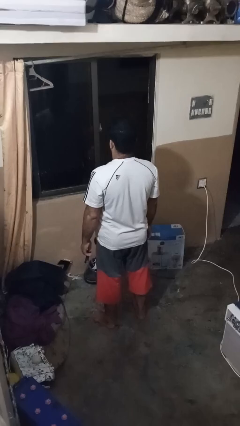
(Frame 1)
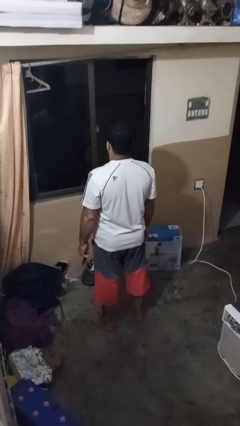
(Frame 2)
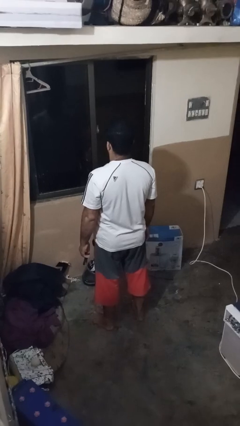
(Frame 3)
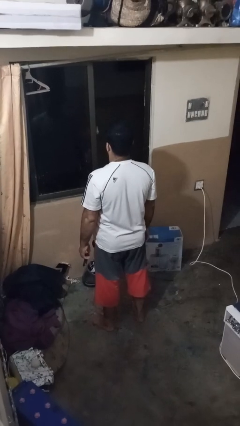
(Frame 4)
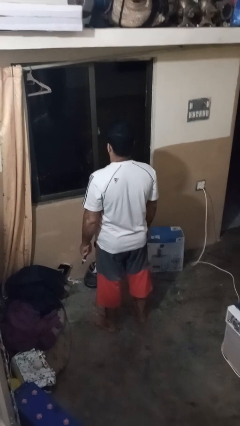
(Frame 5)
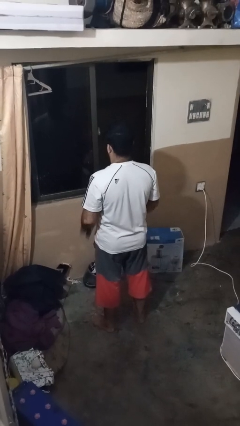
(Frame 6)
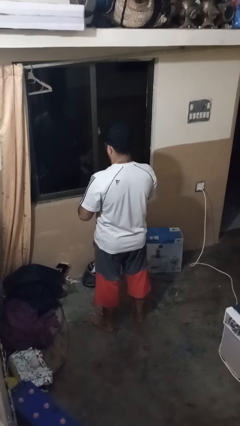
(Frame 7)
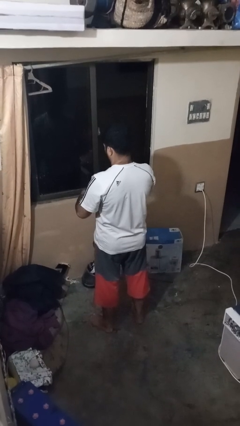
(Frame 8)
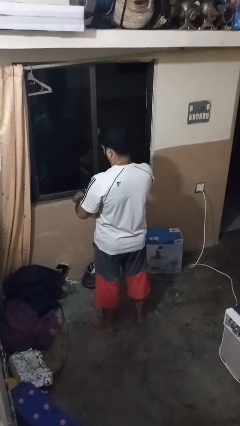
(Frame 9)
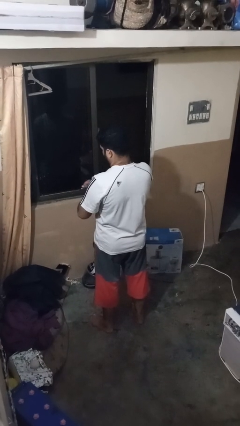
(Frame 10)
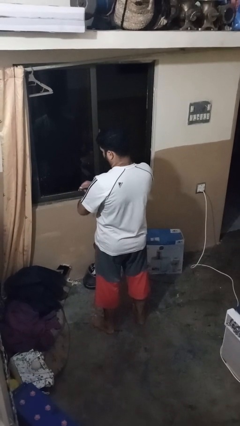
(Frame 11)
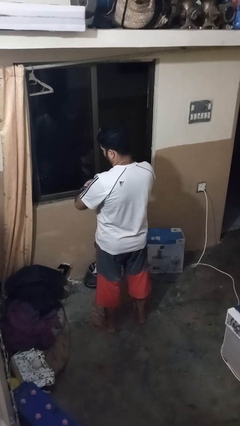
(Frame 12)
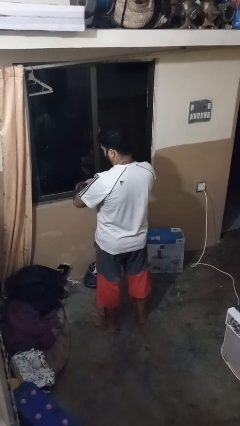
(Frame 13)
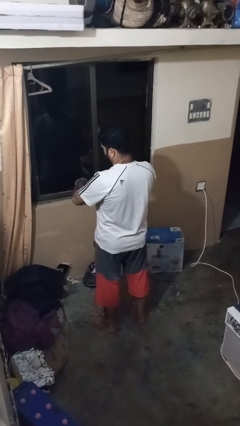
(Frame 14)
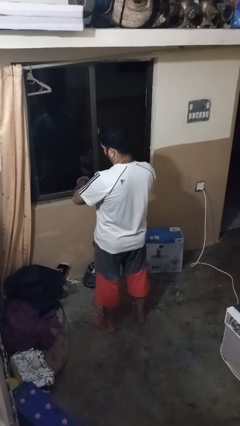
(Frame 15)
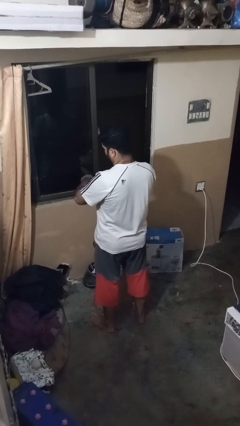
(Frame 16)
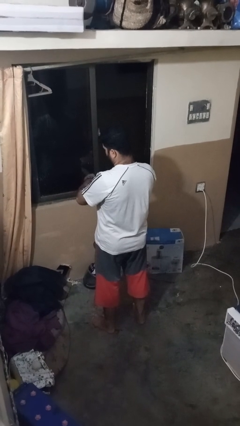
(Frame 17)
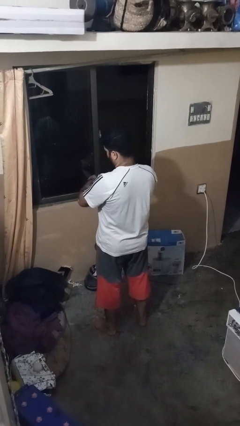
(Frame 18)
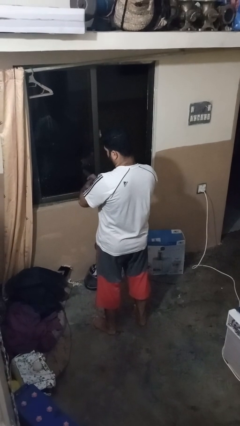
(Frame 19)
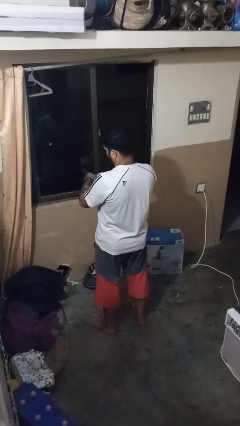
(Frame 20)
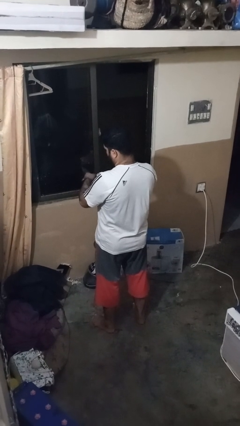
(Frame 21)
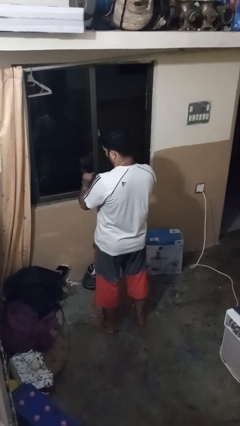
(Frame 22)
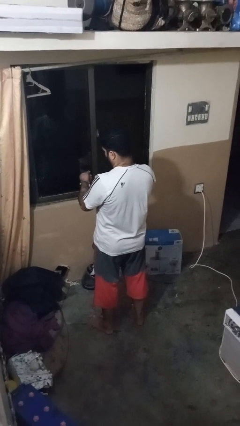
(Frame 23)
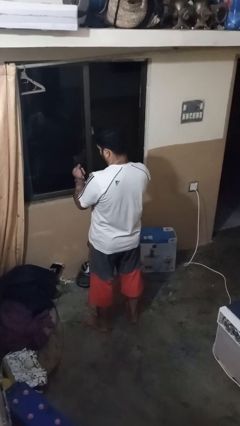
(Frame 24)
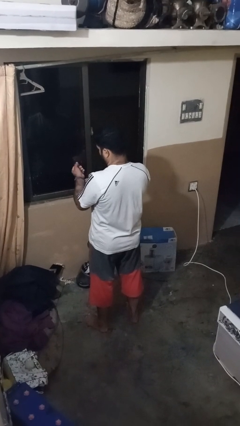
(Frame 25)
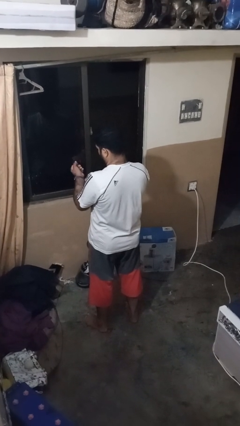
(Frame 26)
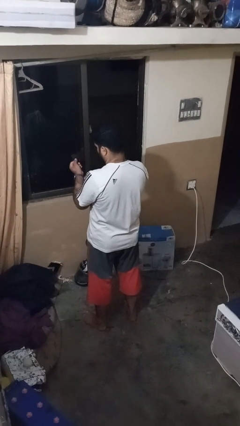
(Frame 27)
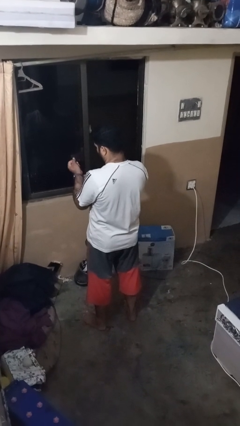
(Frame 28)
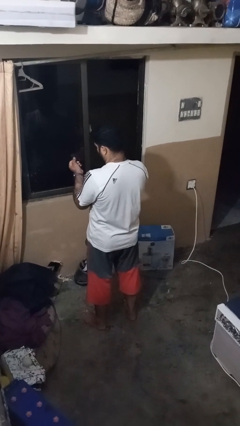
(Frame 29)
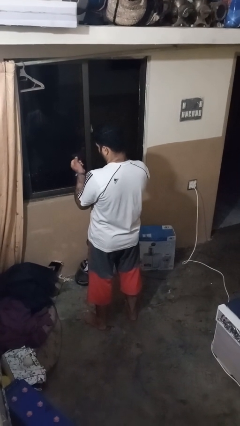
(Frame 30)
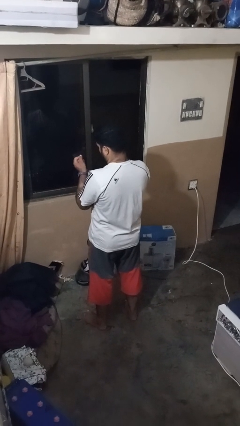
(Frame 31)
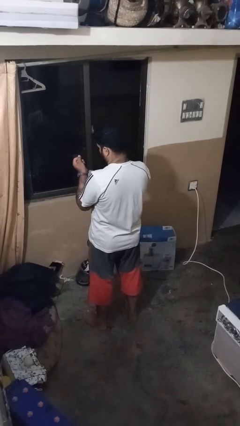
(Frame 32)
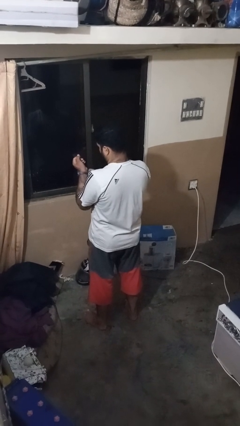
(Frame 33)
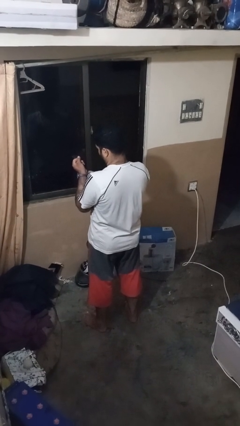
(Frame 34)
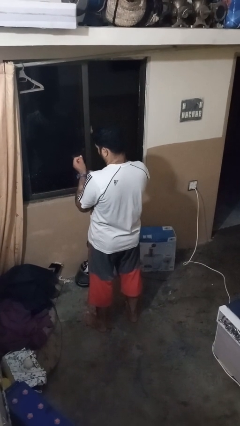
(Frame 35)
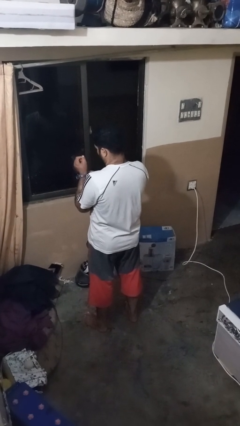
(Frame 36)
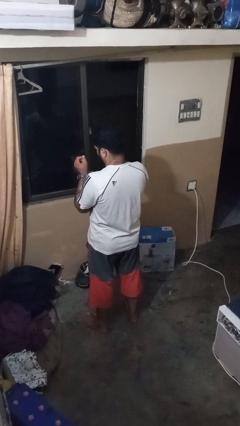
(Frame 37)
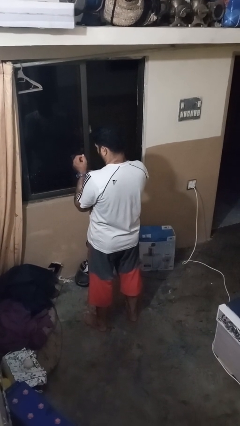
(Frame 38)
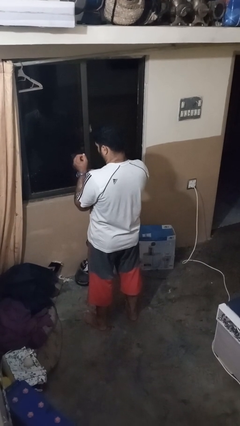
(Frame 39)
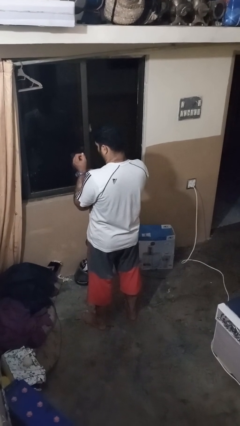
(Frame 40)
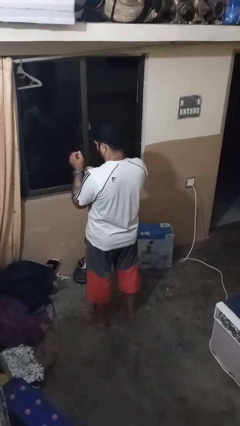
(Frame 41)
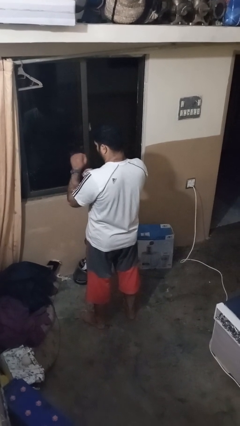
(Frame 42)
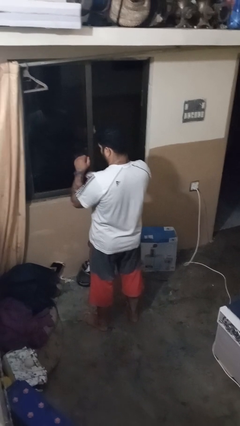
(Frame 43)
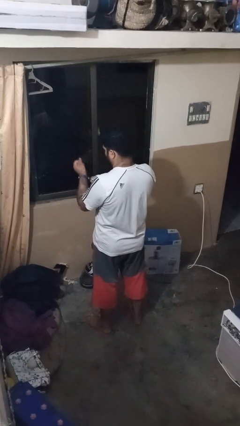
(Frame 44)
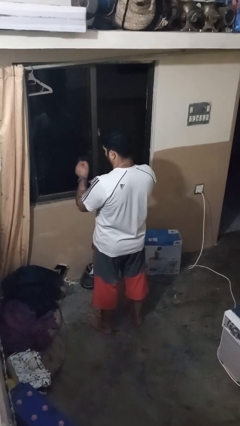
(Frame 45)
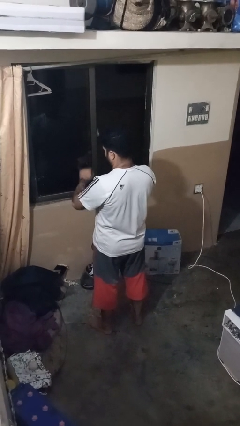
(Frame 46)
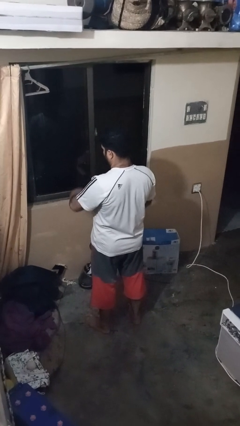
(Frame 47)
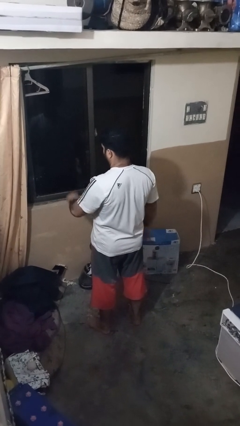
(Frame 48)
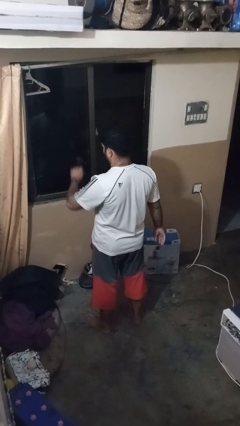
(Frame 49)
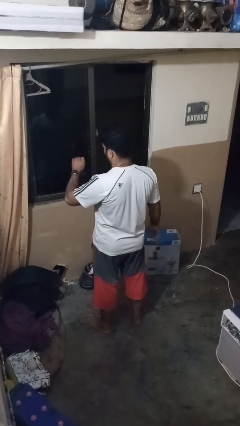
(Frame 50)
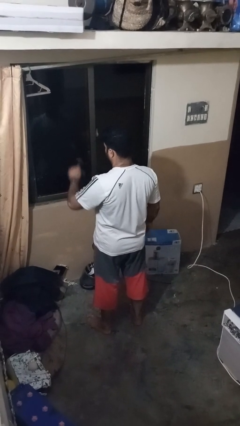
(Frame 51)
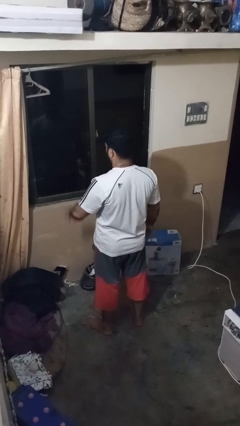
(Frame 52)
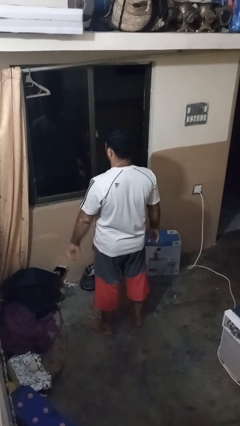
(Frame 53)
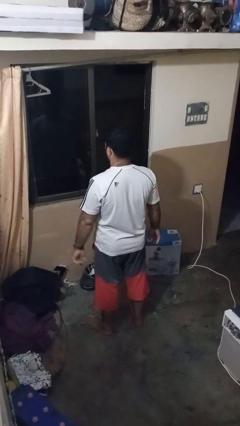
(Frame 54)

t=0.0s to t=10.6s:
person puts on wristwatch

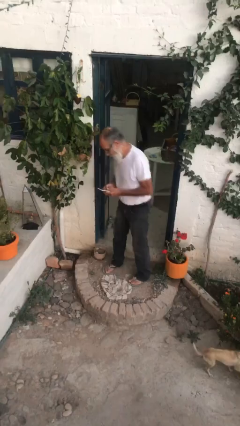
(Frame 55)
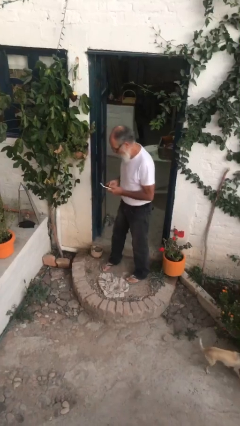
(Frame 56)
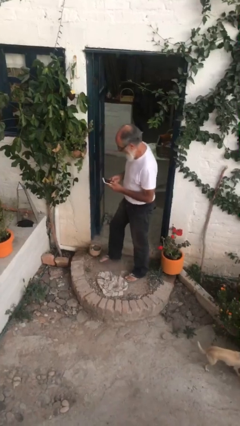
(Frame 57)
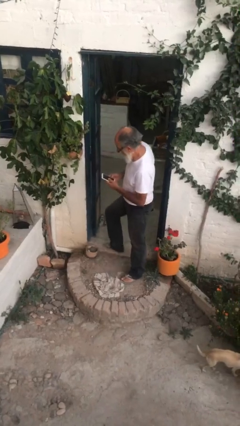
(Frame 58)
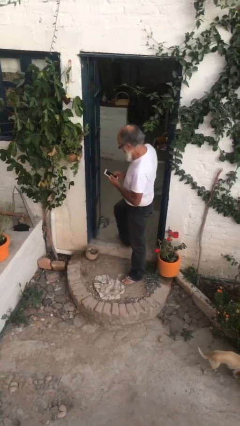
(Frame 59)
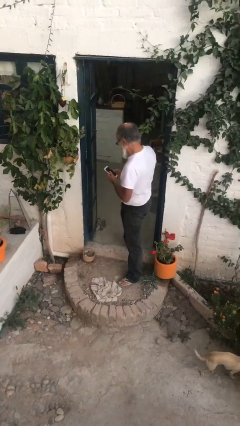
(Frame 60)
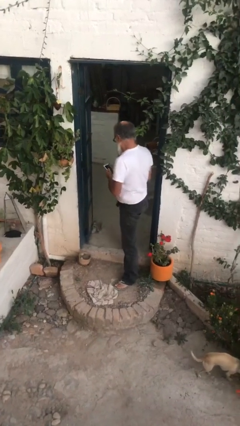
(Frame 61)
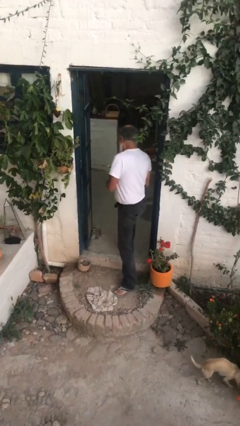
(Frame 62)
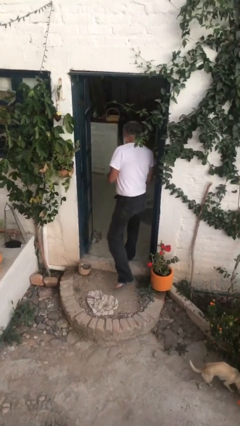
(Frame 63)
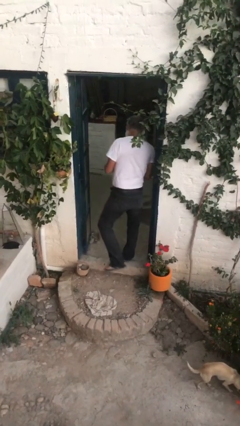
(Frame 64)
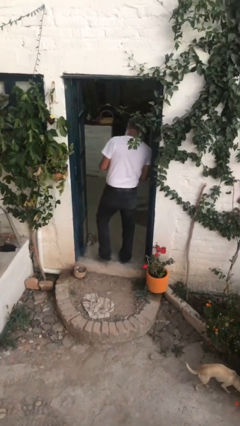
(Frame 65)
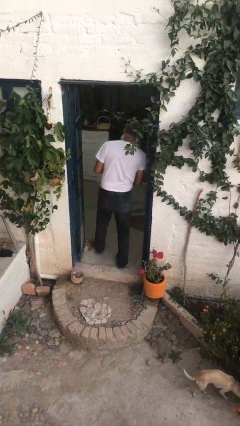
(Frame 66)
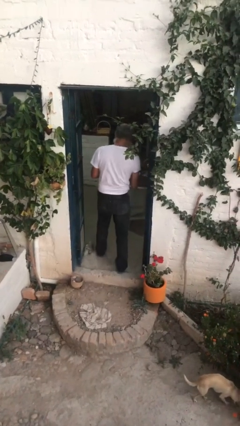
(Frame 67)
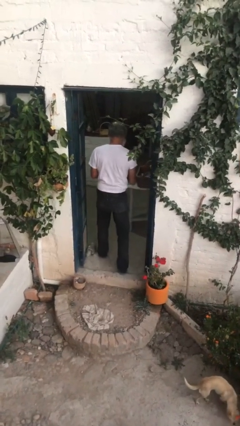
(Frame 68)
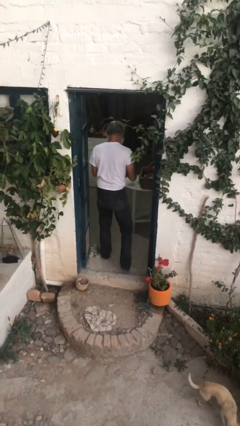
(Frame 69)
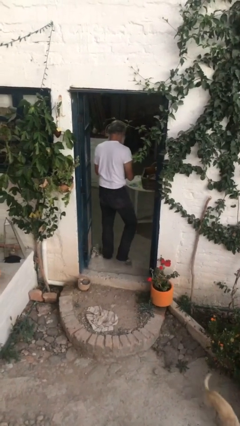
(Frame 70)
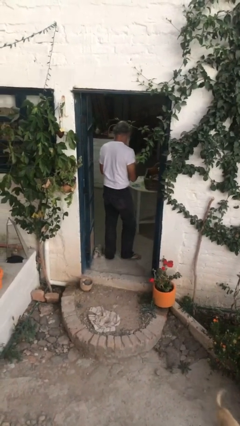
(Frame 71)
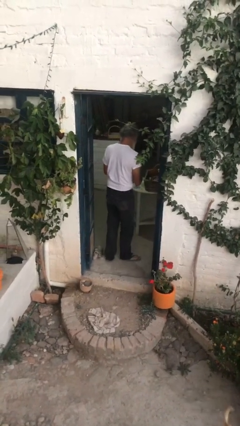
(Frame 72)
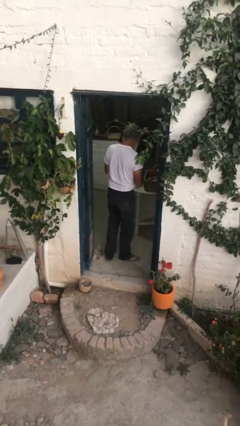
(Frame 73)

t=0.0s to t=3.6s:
person exits scene through structure

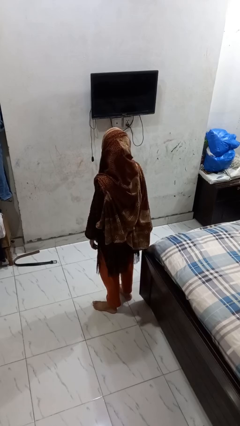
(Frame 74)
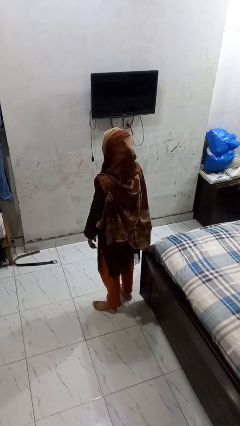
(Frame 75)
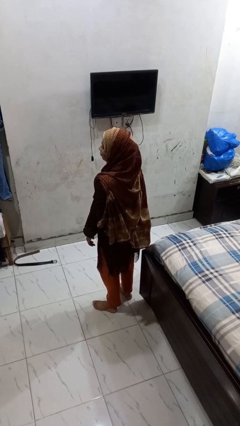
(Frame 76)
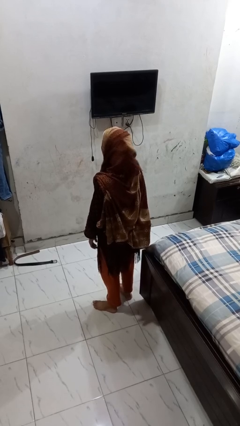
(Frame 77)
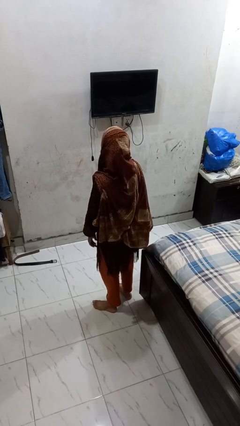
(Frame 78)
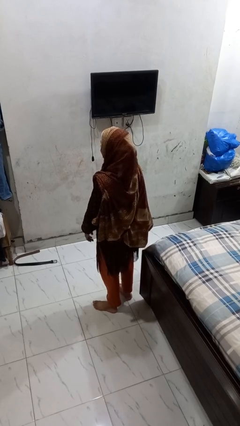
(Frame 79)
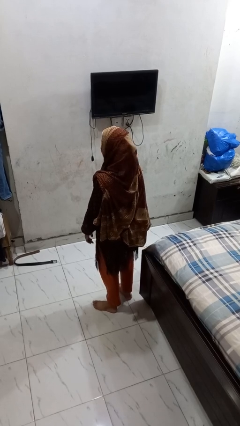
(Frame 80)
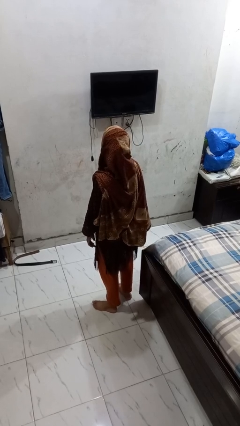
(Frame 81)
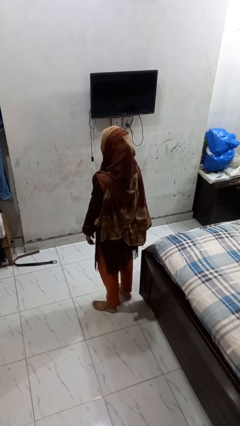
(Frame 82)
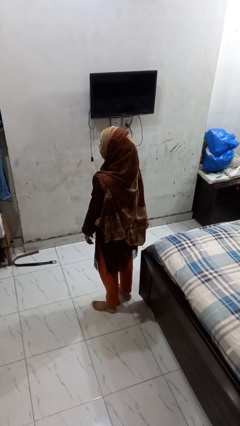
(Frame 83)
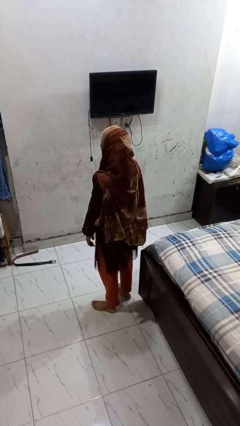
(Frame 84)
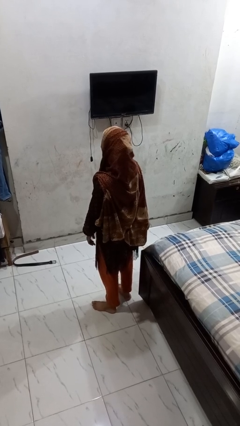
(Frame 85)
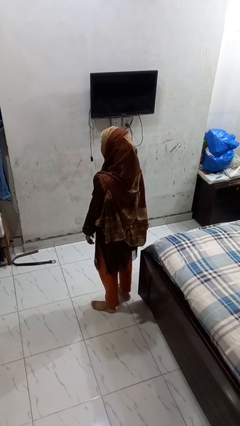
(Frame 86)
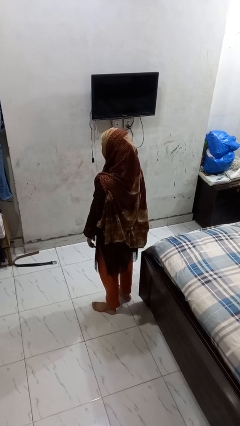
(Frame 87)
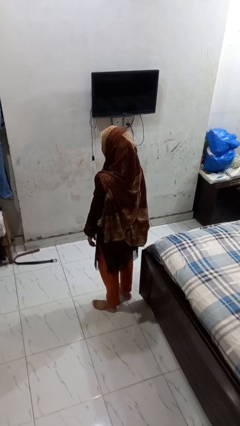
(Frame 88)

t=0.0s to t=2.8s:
person shakes head

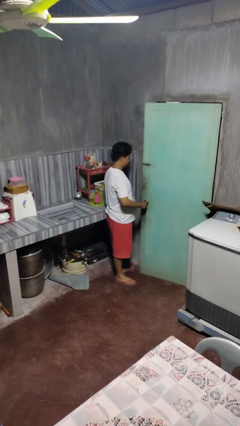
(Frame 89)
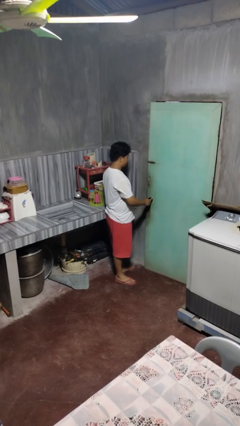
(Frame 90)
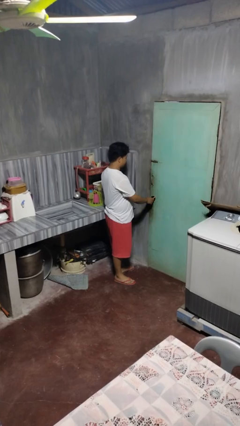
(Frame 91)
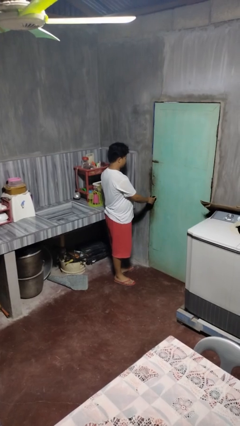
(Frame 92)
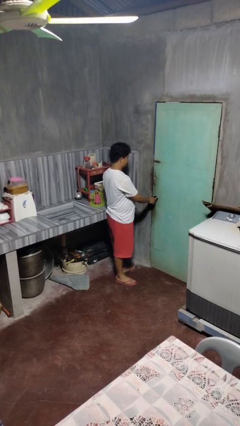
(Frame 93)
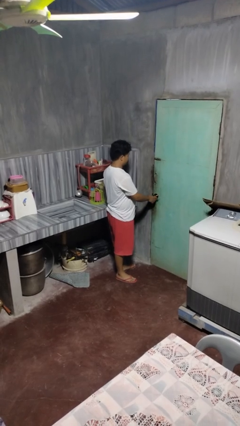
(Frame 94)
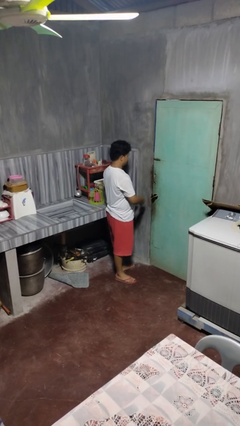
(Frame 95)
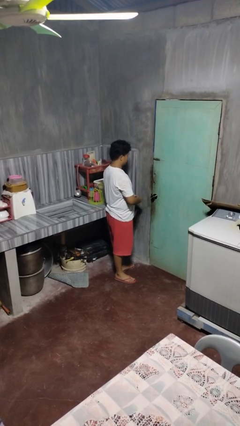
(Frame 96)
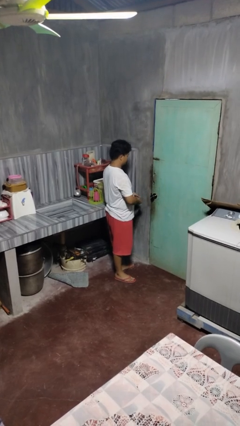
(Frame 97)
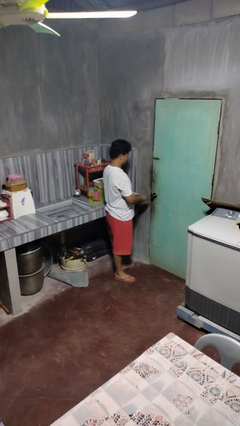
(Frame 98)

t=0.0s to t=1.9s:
person closes facility door
